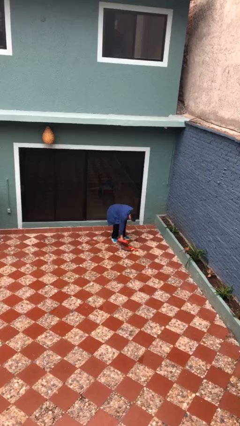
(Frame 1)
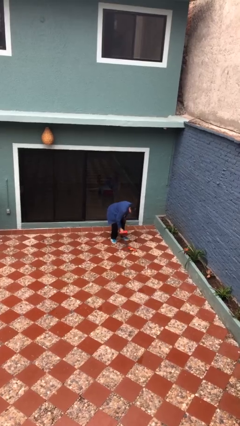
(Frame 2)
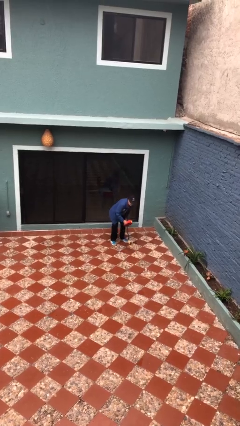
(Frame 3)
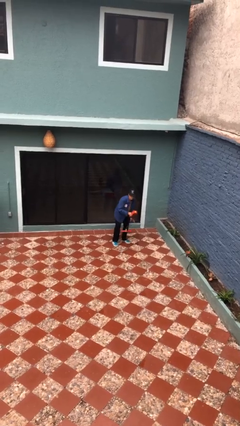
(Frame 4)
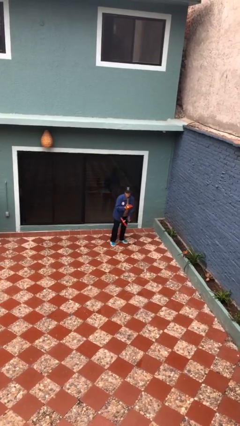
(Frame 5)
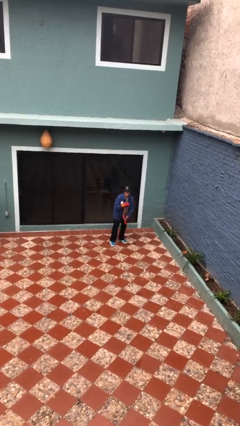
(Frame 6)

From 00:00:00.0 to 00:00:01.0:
person picks up object from floor

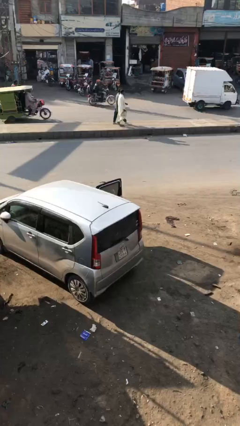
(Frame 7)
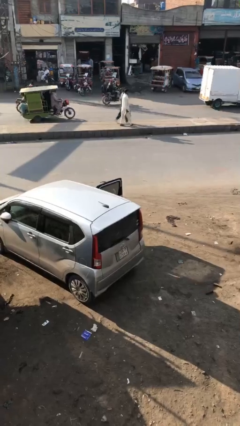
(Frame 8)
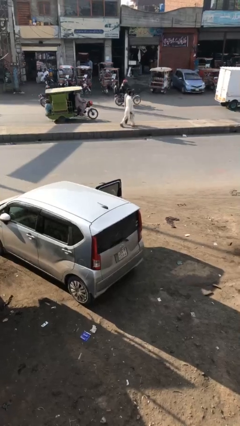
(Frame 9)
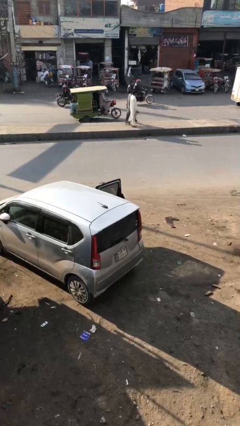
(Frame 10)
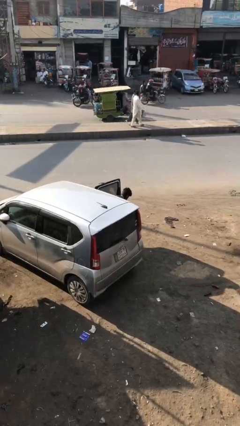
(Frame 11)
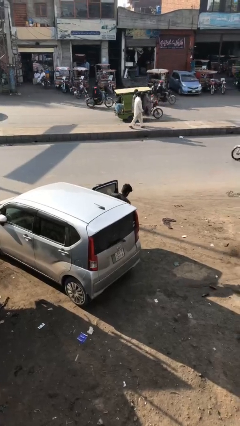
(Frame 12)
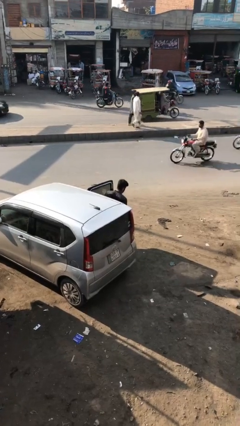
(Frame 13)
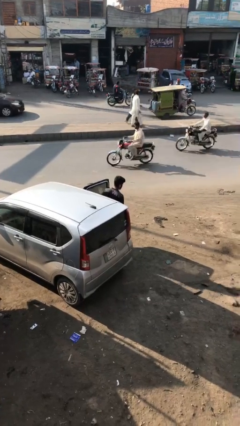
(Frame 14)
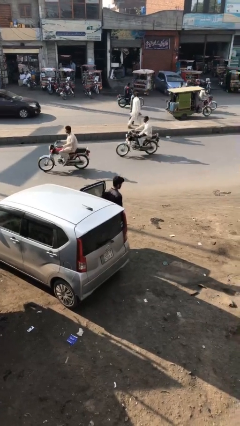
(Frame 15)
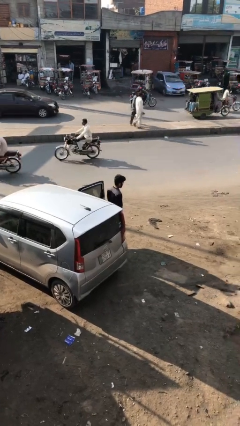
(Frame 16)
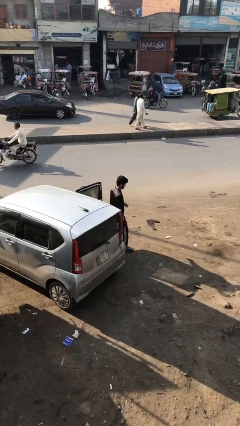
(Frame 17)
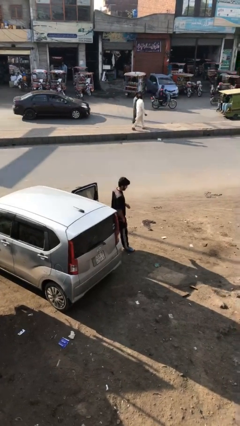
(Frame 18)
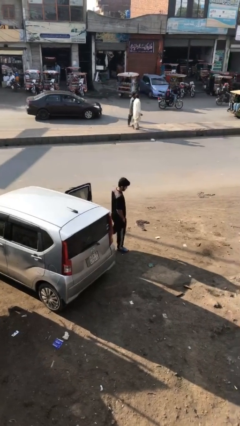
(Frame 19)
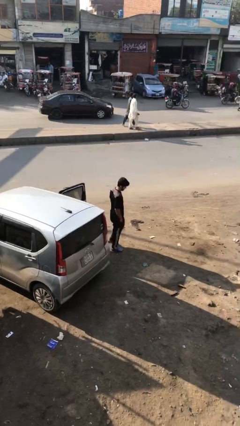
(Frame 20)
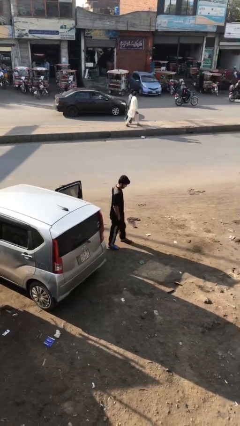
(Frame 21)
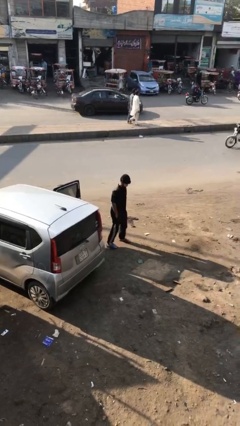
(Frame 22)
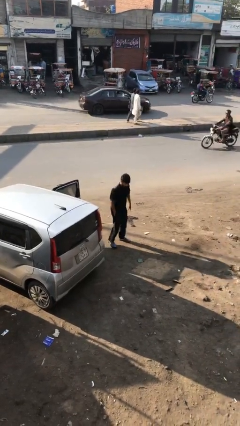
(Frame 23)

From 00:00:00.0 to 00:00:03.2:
person exits car

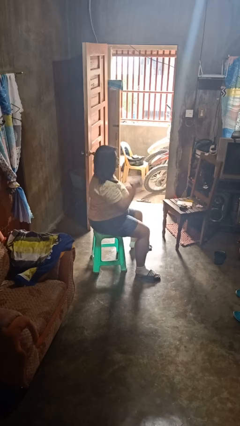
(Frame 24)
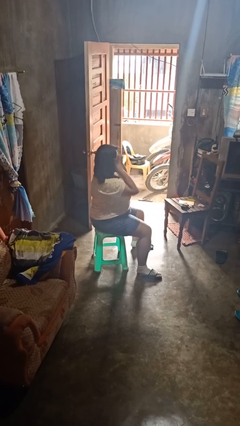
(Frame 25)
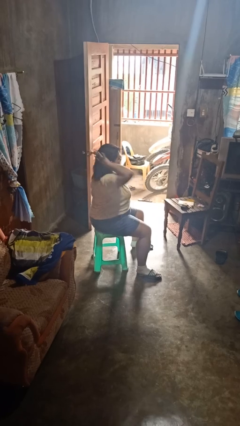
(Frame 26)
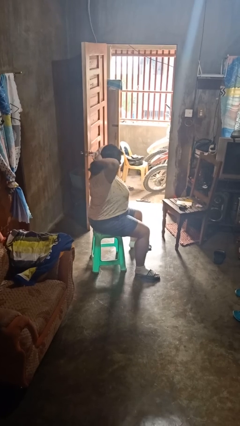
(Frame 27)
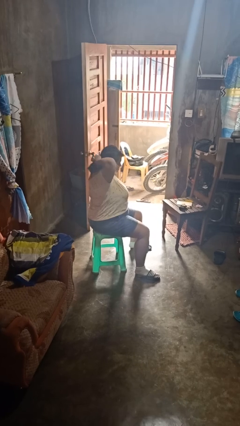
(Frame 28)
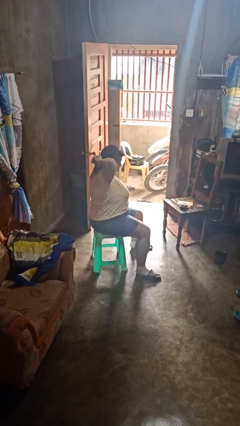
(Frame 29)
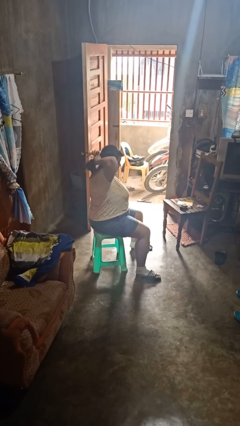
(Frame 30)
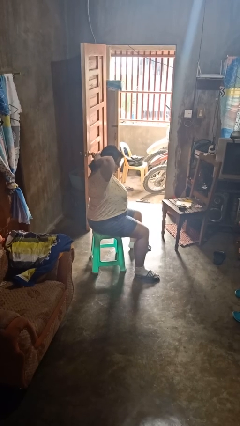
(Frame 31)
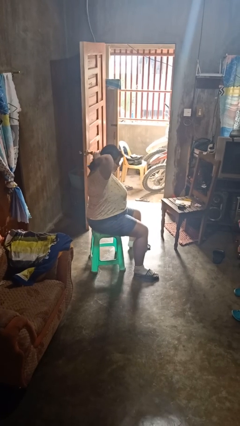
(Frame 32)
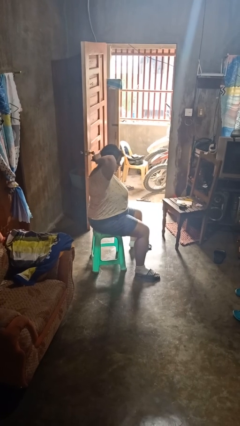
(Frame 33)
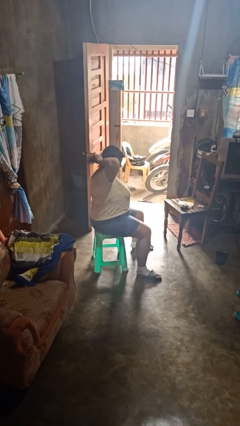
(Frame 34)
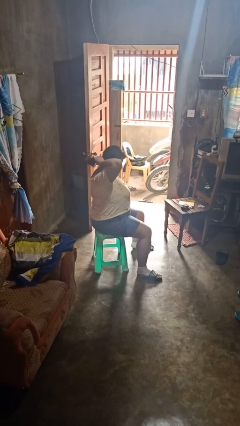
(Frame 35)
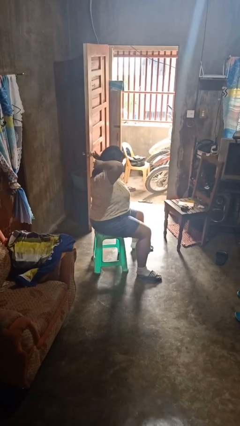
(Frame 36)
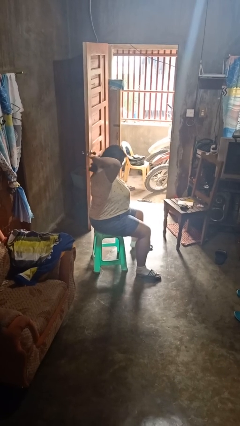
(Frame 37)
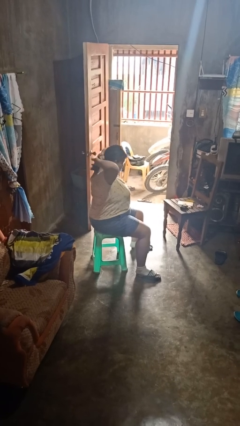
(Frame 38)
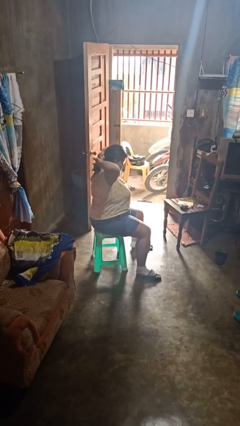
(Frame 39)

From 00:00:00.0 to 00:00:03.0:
person puts hair in ponytail

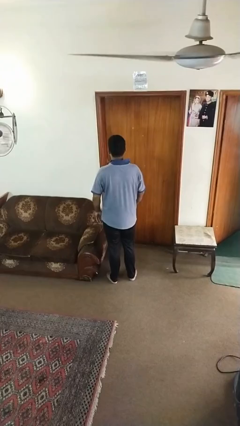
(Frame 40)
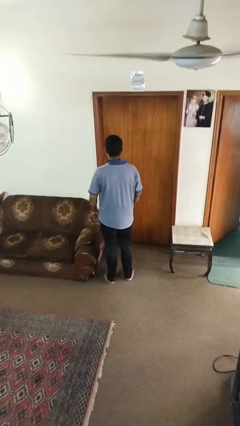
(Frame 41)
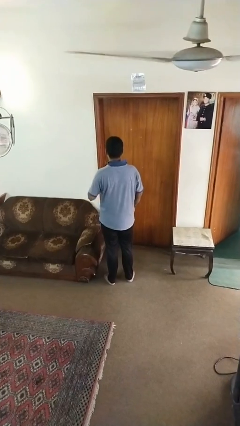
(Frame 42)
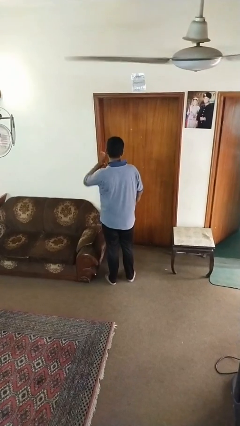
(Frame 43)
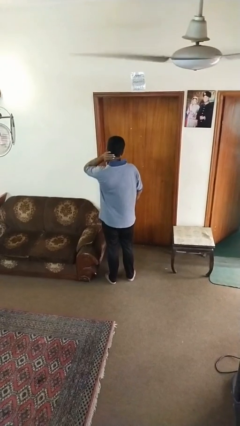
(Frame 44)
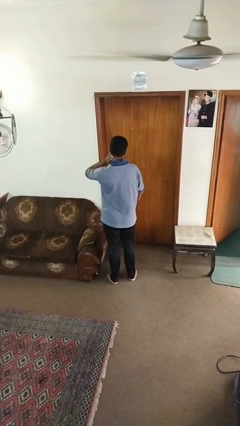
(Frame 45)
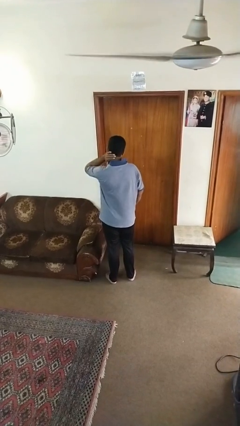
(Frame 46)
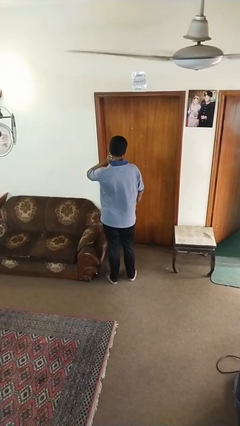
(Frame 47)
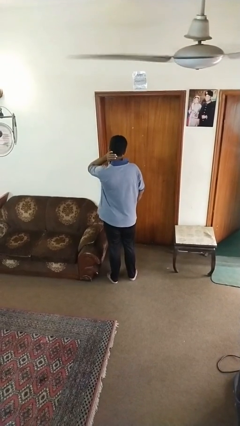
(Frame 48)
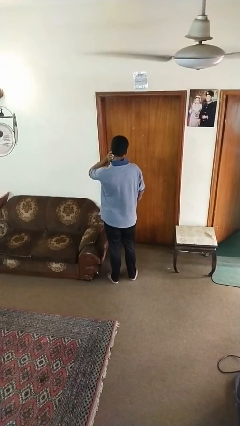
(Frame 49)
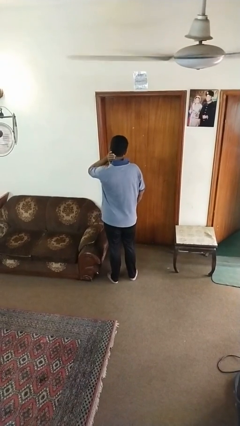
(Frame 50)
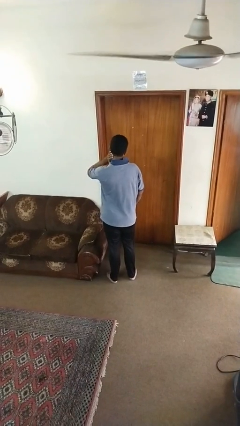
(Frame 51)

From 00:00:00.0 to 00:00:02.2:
person rubs neck

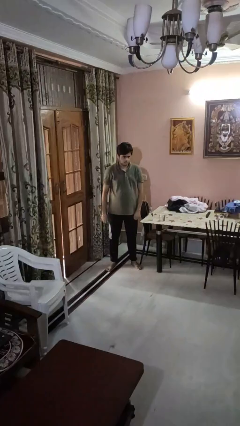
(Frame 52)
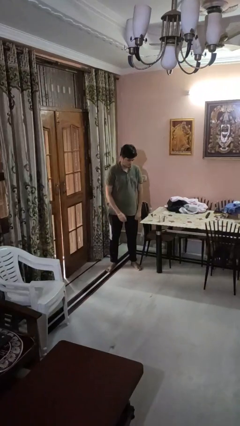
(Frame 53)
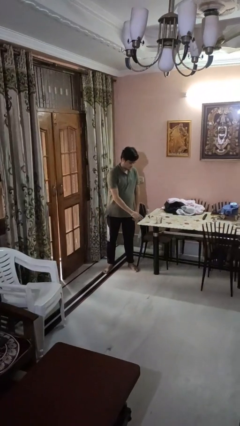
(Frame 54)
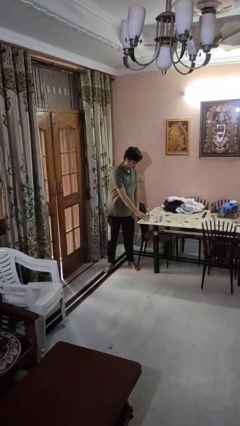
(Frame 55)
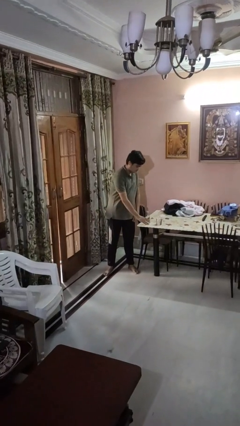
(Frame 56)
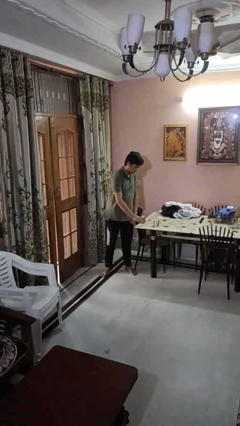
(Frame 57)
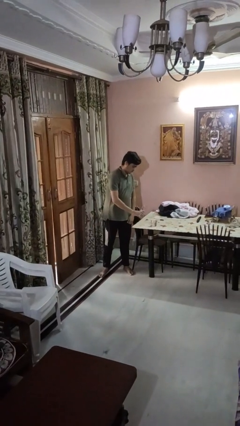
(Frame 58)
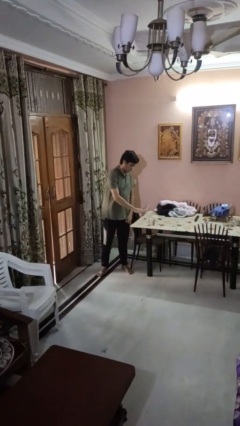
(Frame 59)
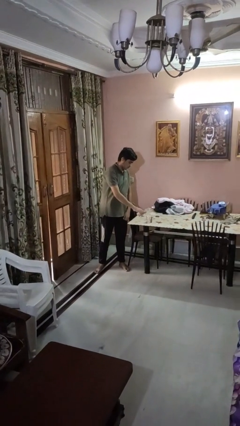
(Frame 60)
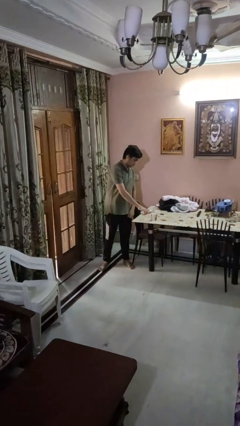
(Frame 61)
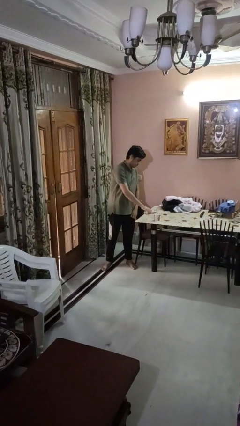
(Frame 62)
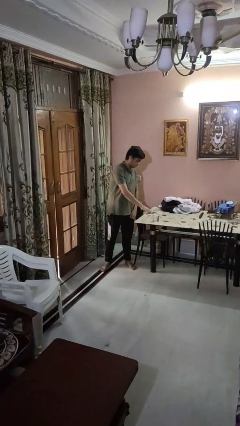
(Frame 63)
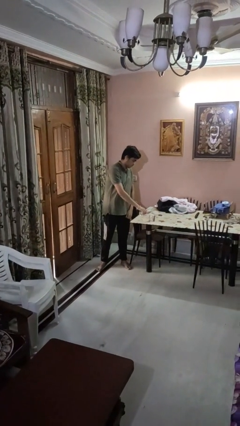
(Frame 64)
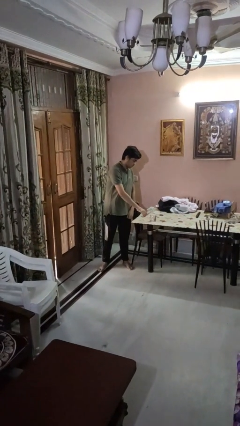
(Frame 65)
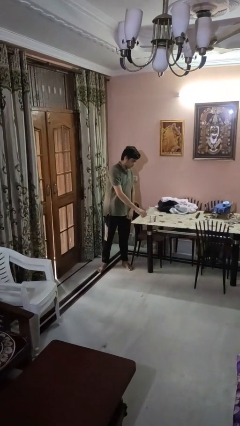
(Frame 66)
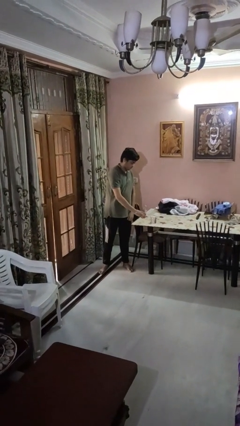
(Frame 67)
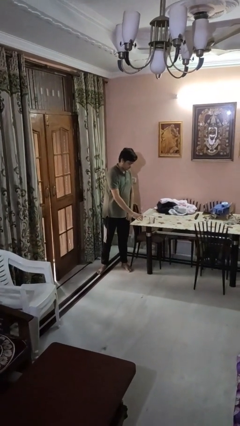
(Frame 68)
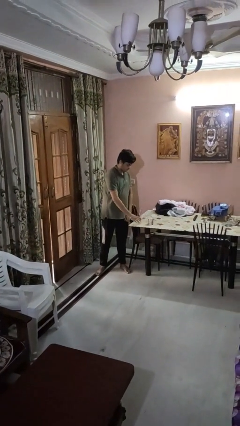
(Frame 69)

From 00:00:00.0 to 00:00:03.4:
person pours liquid into cup

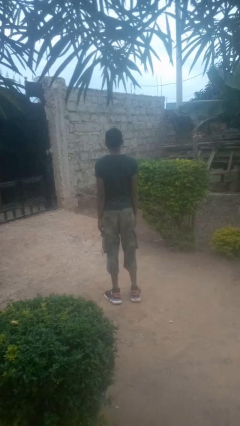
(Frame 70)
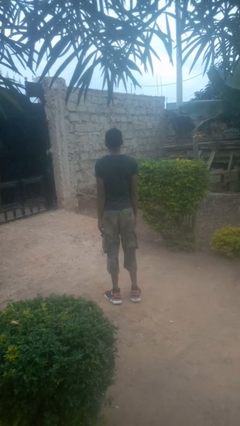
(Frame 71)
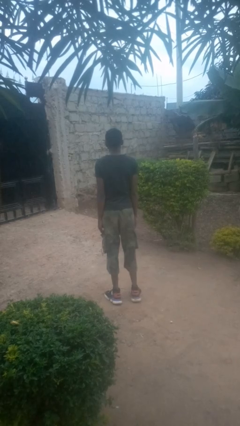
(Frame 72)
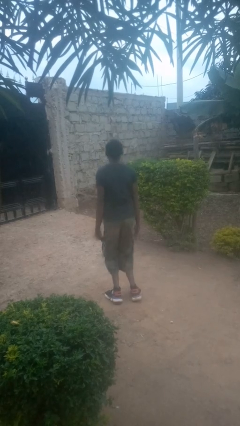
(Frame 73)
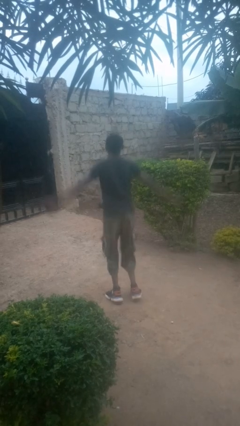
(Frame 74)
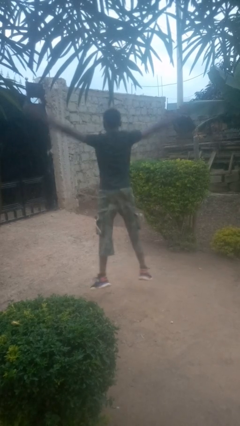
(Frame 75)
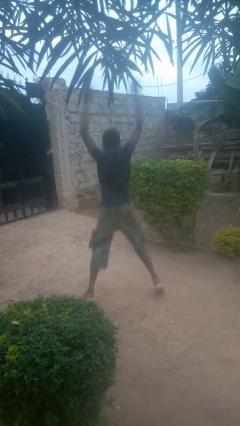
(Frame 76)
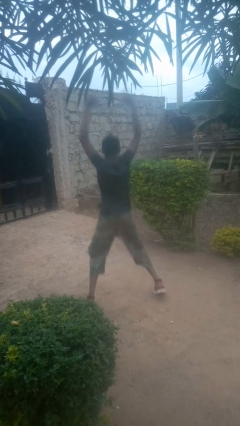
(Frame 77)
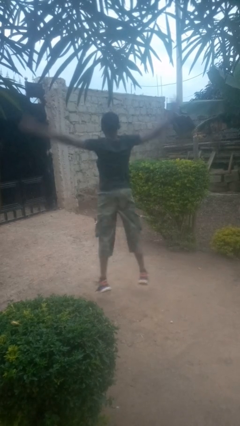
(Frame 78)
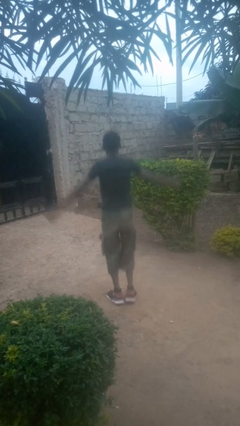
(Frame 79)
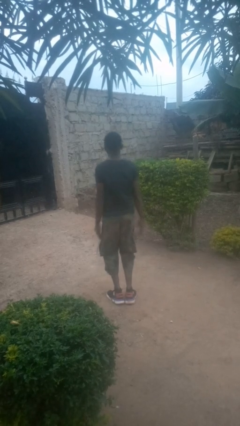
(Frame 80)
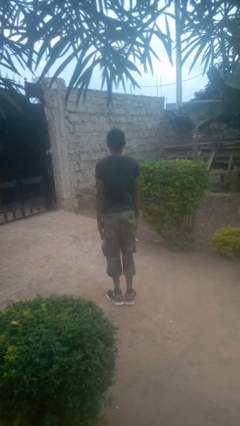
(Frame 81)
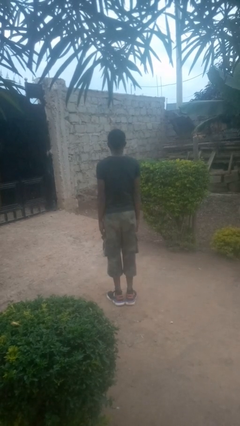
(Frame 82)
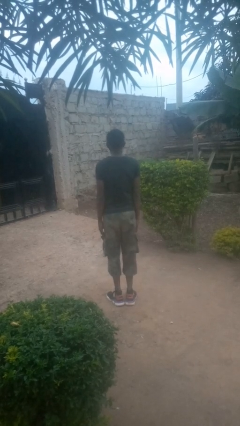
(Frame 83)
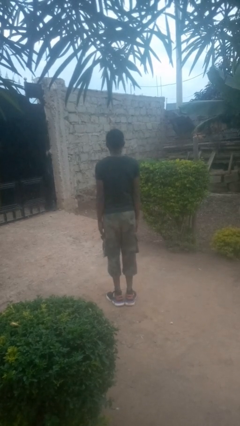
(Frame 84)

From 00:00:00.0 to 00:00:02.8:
person exercises with jumping jacks

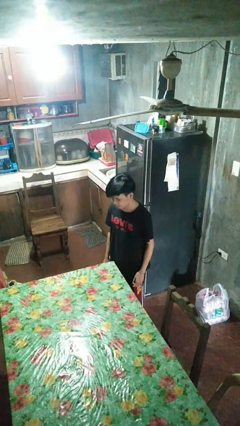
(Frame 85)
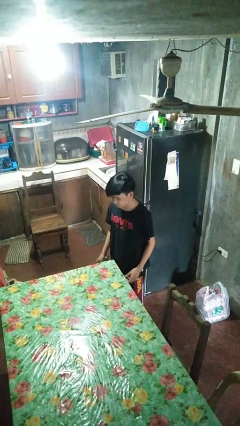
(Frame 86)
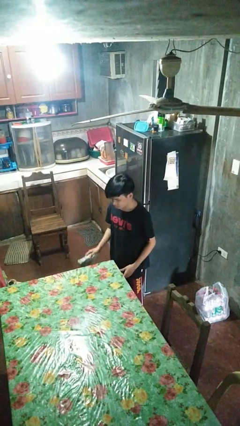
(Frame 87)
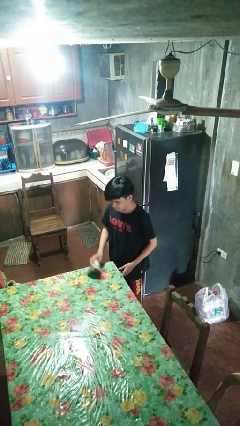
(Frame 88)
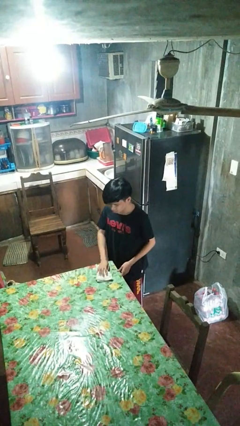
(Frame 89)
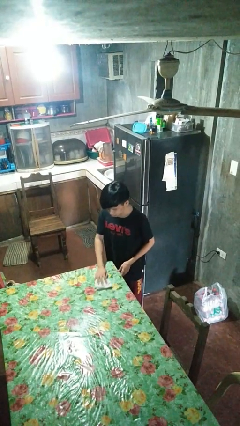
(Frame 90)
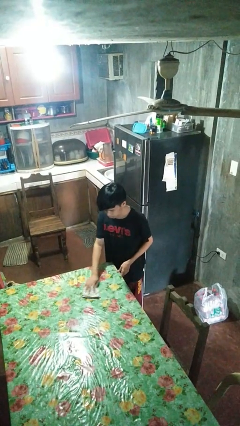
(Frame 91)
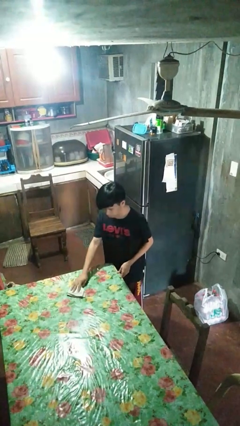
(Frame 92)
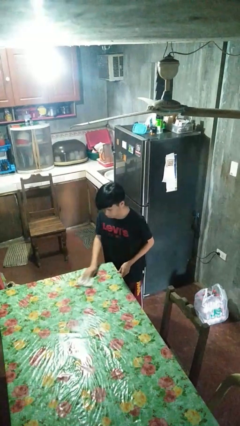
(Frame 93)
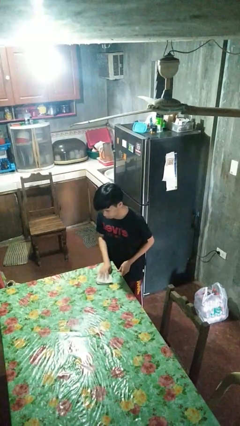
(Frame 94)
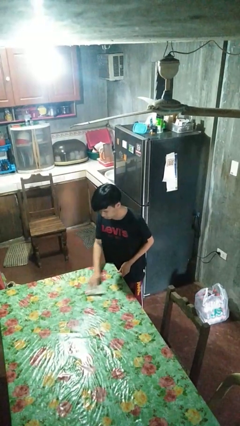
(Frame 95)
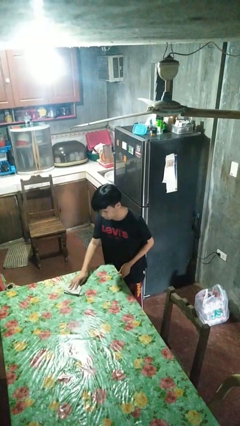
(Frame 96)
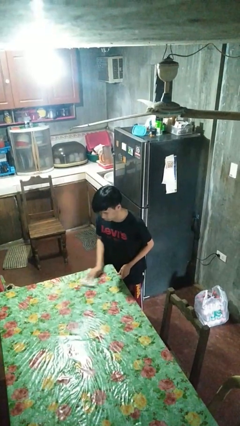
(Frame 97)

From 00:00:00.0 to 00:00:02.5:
person cleans table with rag
